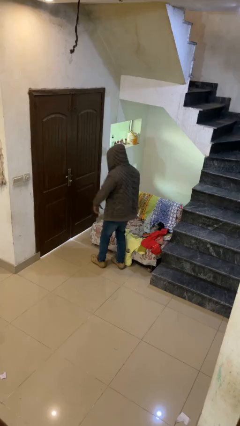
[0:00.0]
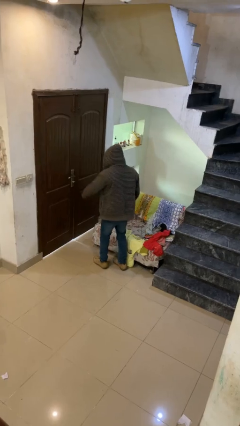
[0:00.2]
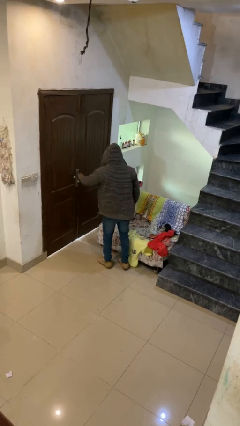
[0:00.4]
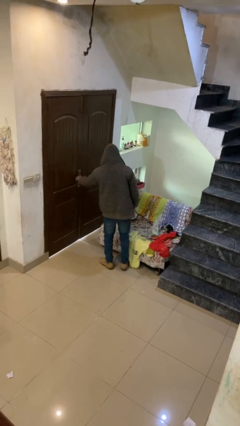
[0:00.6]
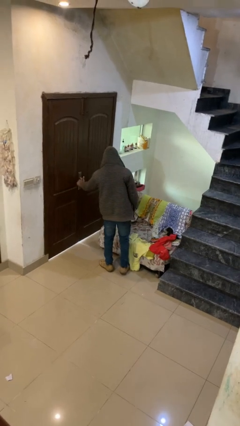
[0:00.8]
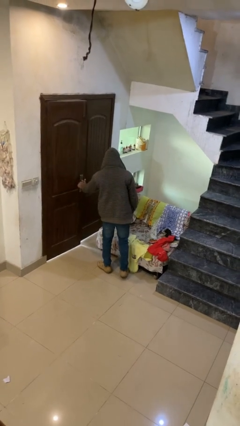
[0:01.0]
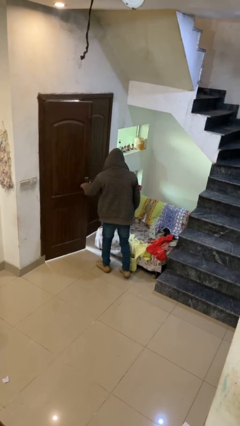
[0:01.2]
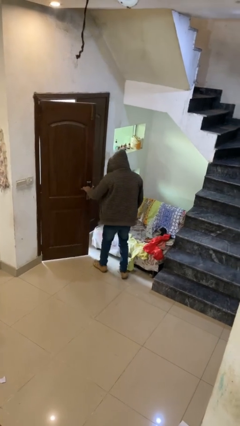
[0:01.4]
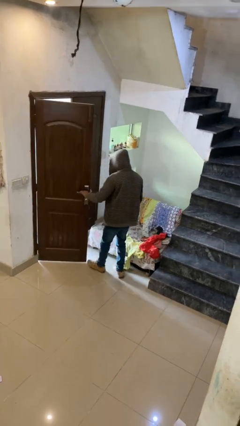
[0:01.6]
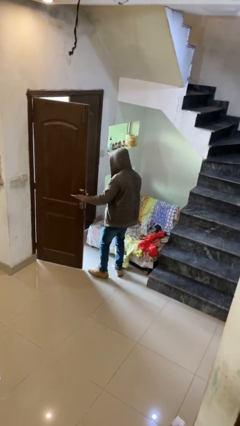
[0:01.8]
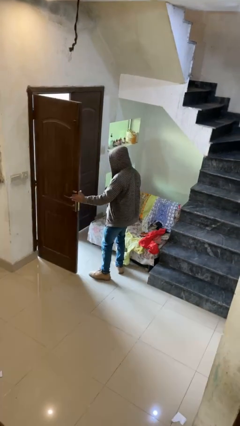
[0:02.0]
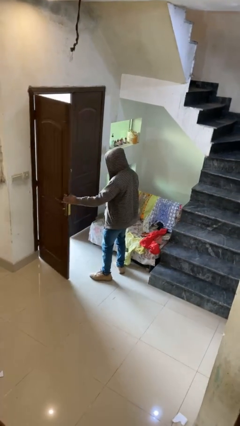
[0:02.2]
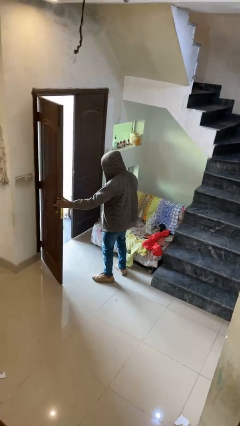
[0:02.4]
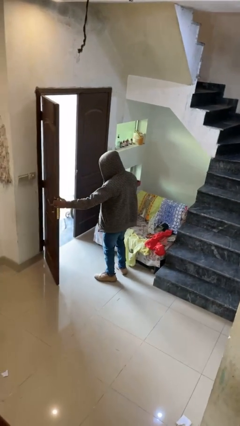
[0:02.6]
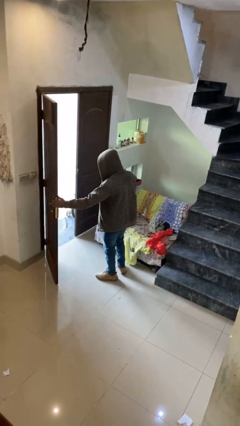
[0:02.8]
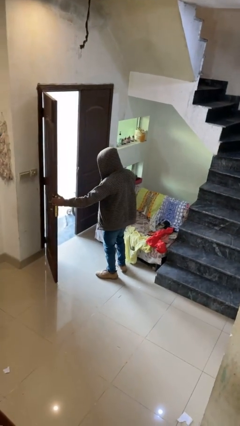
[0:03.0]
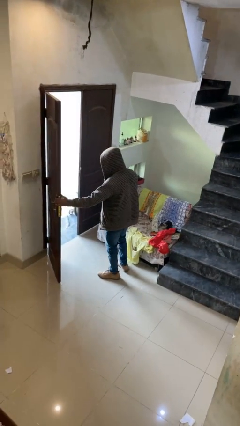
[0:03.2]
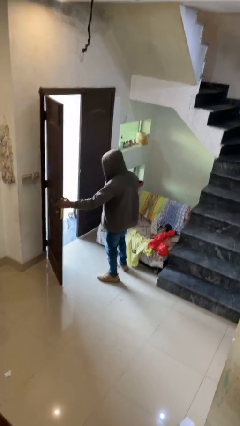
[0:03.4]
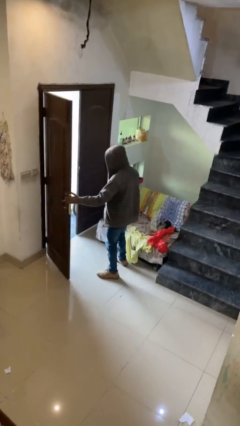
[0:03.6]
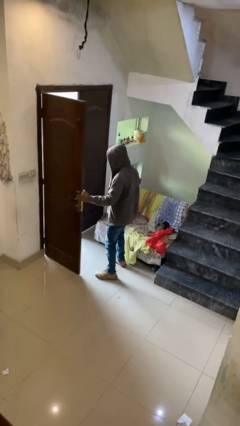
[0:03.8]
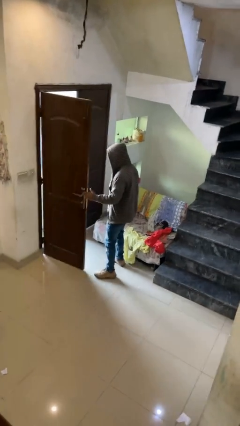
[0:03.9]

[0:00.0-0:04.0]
person opens facility door

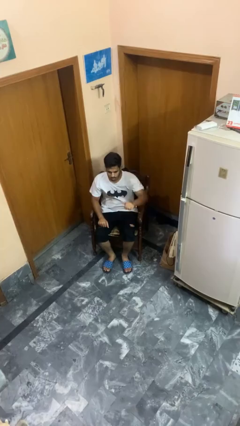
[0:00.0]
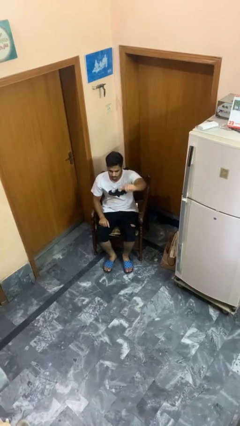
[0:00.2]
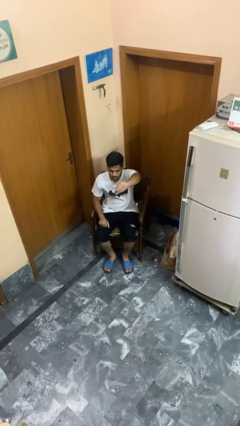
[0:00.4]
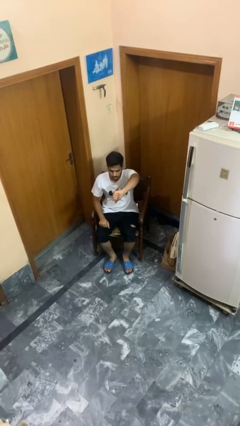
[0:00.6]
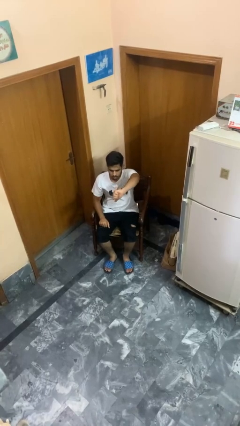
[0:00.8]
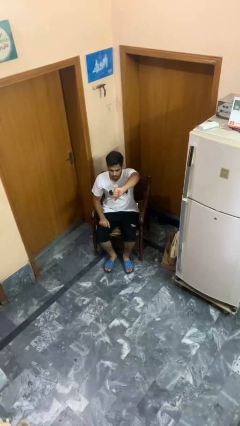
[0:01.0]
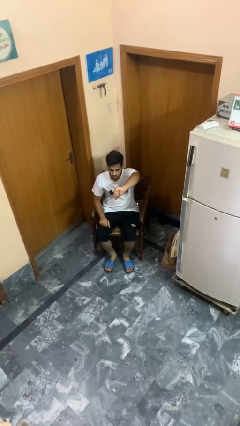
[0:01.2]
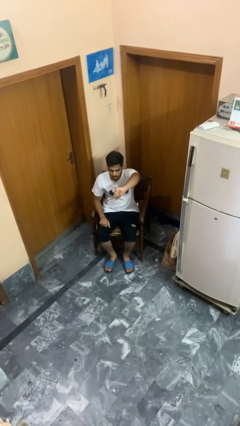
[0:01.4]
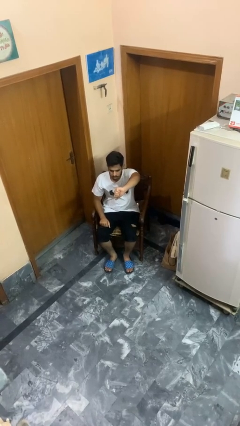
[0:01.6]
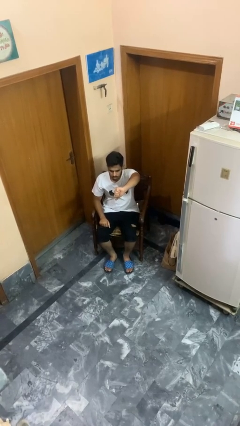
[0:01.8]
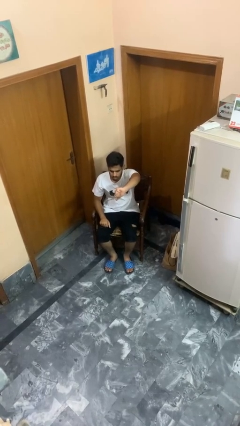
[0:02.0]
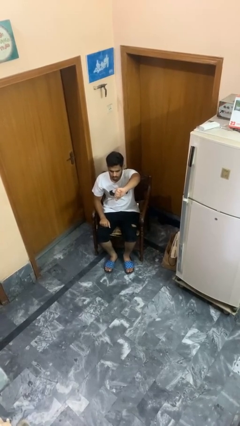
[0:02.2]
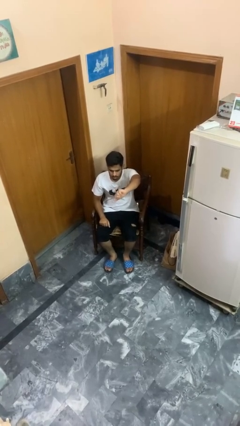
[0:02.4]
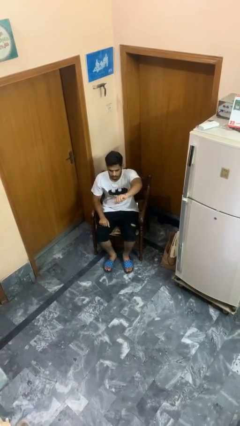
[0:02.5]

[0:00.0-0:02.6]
person gestures thumbs down

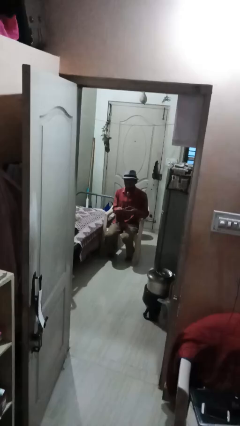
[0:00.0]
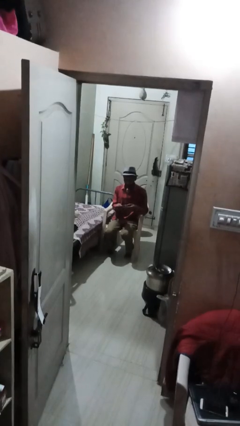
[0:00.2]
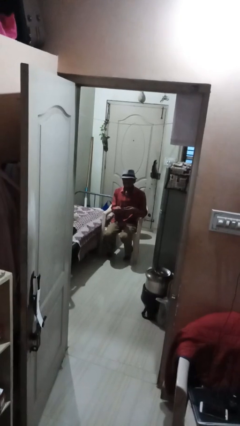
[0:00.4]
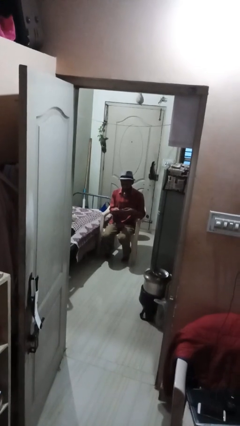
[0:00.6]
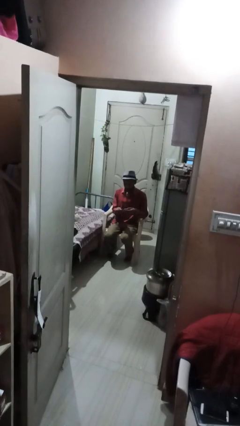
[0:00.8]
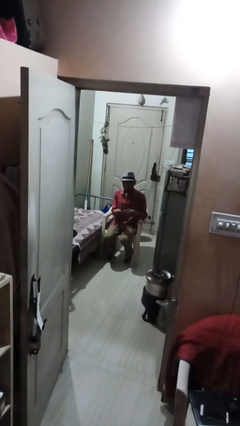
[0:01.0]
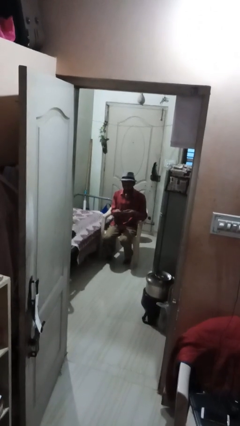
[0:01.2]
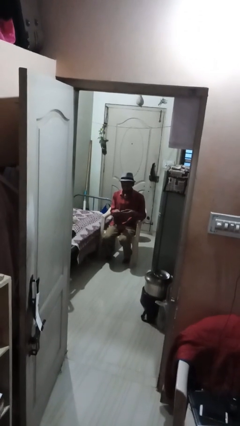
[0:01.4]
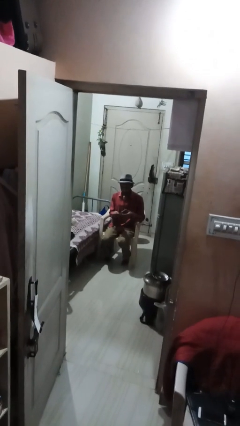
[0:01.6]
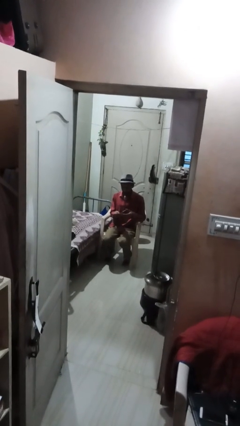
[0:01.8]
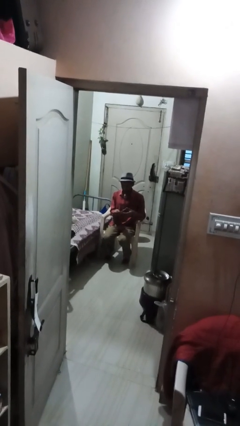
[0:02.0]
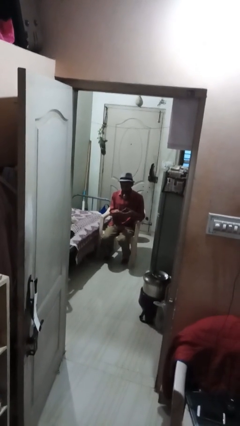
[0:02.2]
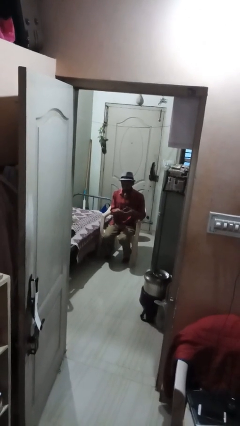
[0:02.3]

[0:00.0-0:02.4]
person clips fingernails

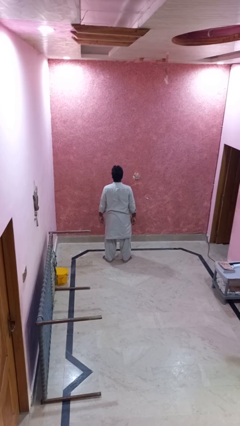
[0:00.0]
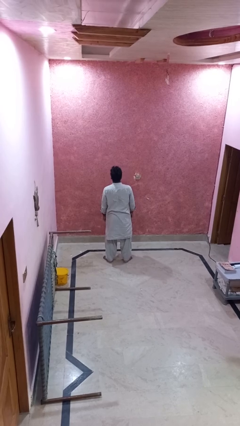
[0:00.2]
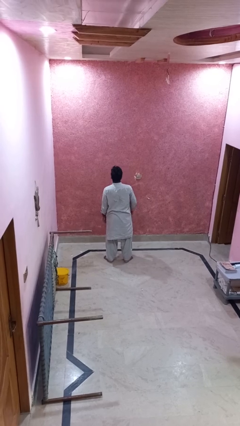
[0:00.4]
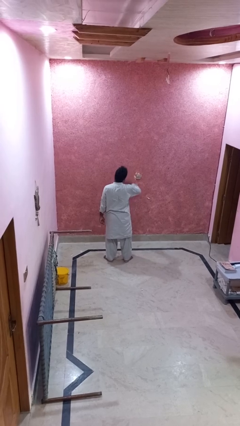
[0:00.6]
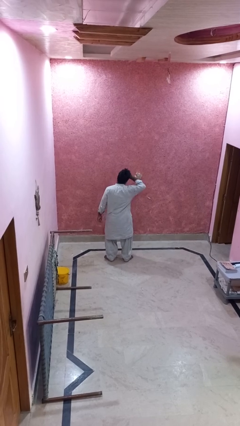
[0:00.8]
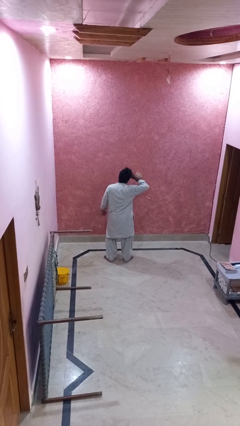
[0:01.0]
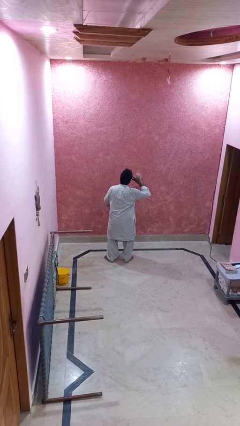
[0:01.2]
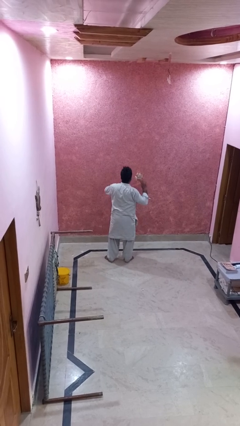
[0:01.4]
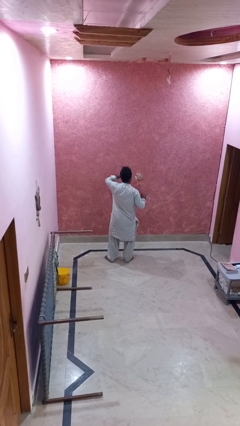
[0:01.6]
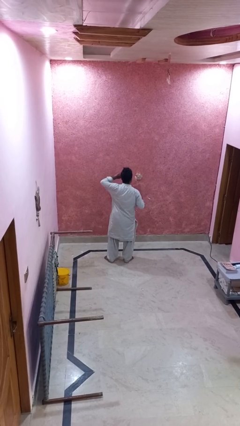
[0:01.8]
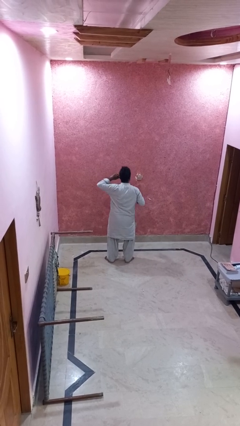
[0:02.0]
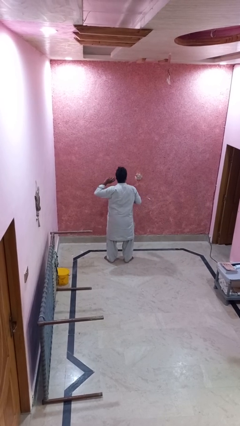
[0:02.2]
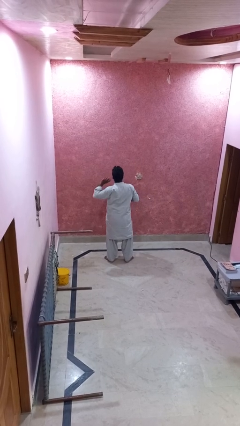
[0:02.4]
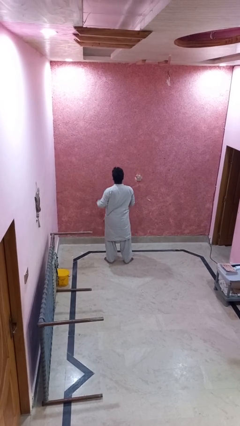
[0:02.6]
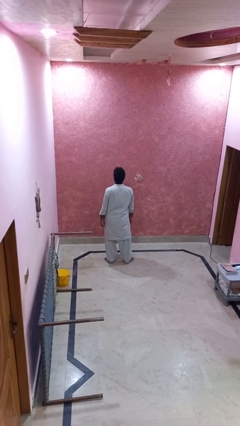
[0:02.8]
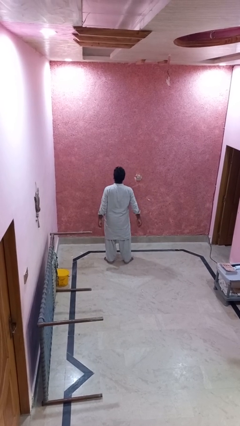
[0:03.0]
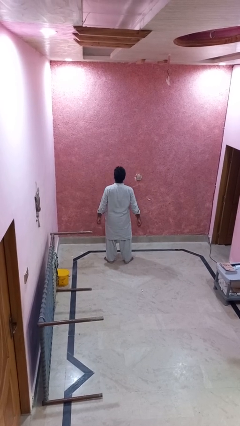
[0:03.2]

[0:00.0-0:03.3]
person dances in place

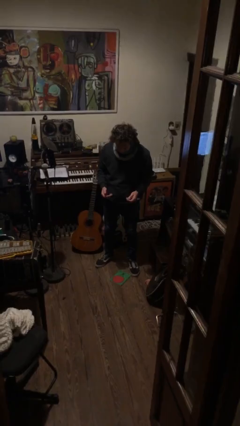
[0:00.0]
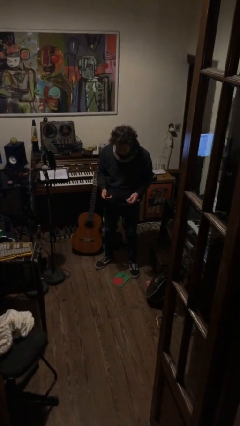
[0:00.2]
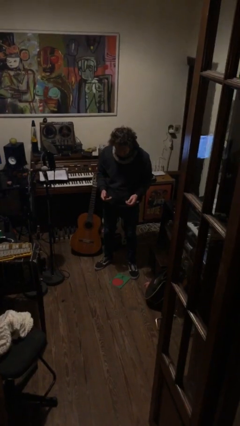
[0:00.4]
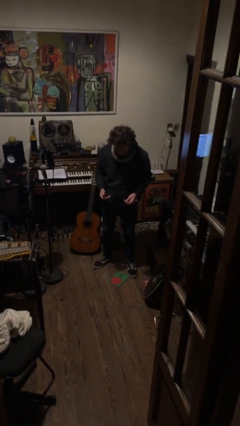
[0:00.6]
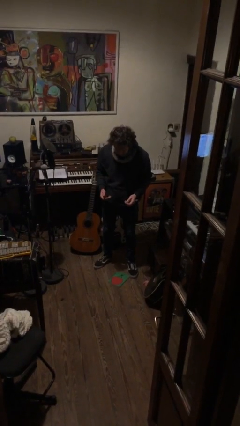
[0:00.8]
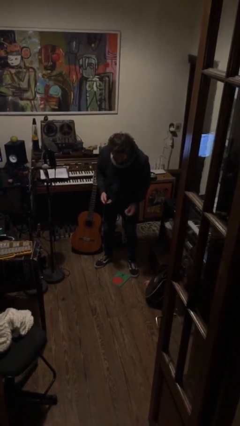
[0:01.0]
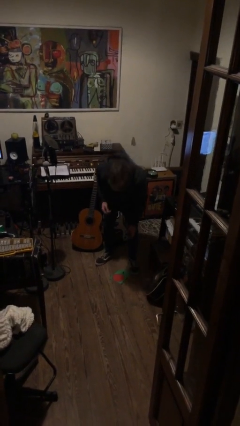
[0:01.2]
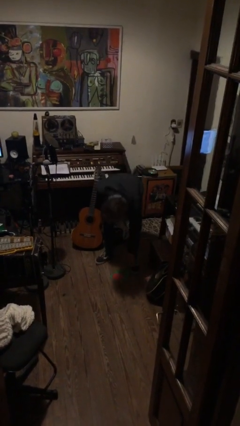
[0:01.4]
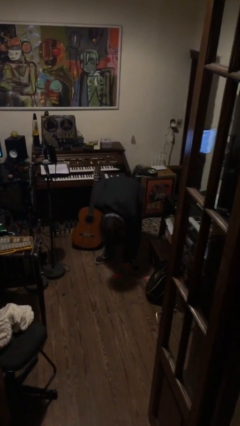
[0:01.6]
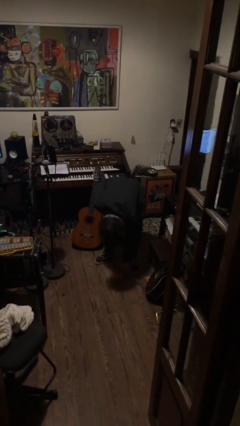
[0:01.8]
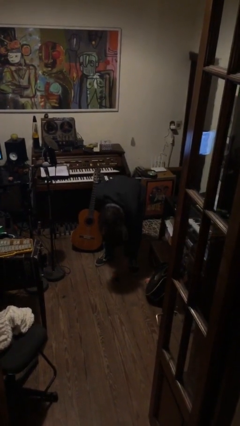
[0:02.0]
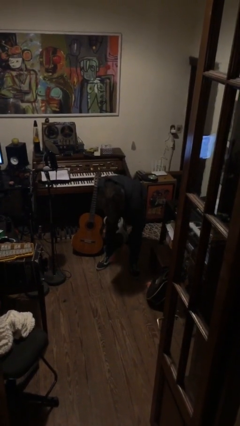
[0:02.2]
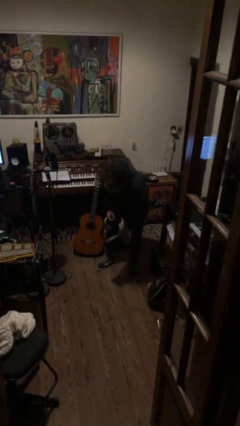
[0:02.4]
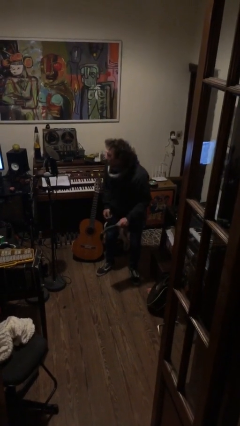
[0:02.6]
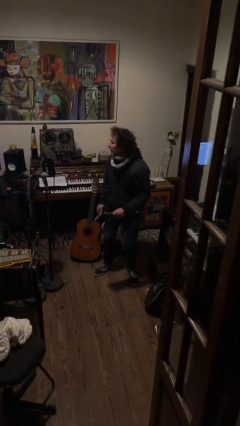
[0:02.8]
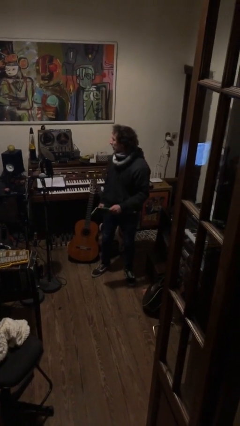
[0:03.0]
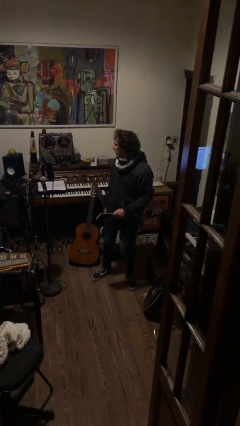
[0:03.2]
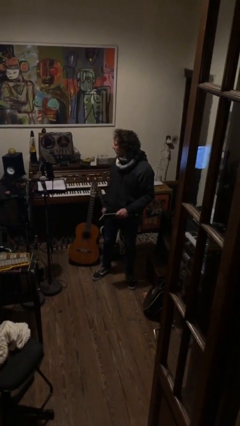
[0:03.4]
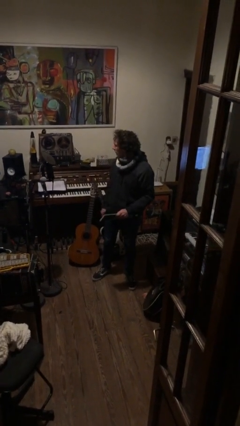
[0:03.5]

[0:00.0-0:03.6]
person picks up object from floor

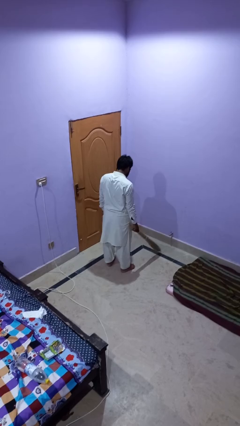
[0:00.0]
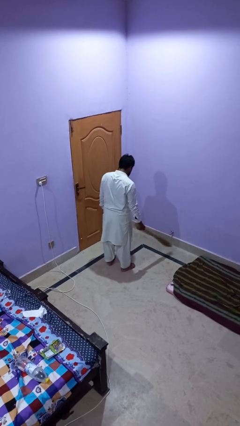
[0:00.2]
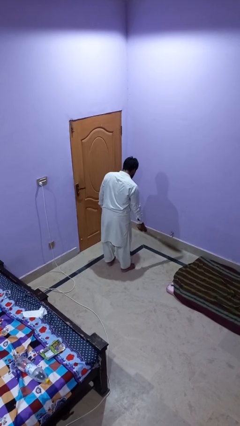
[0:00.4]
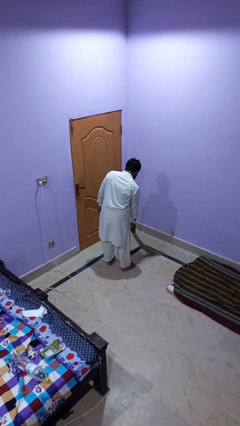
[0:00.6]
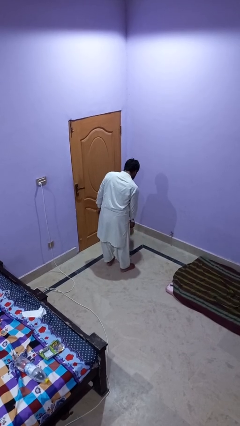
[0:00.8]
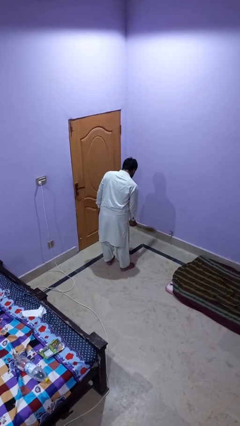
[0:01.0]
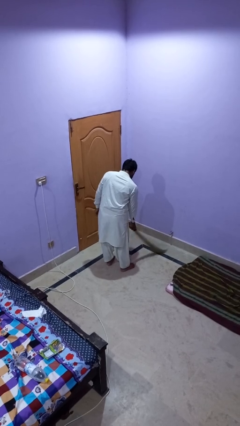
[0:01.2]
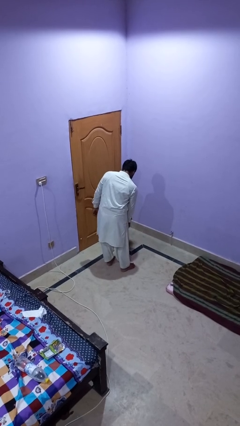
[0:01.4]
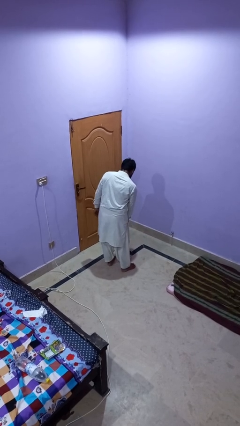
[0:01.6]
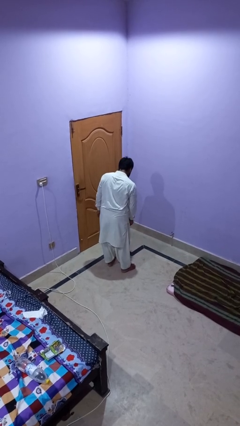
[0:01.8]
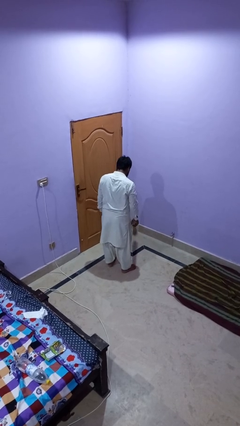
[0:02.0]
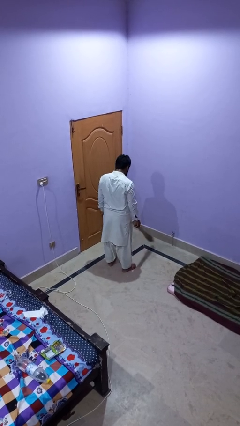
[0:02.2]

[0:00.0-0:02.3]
person sweeps floor
